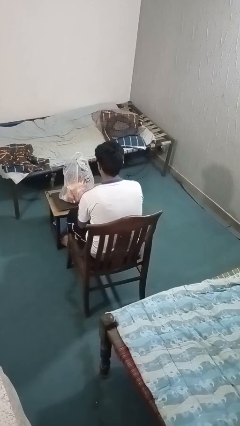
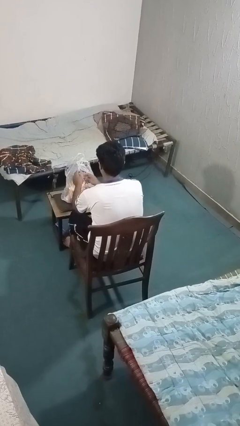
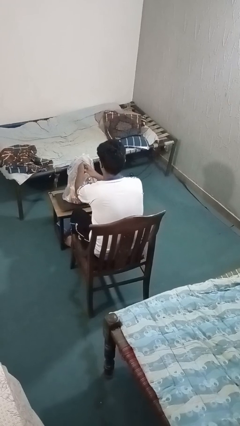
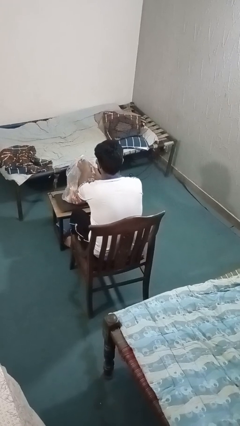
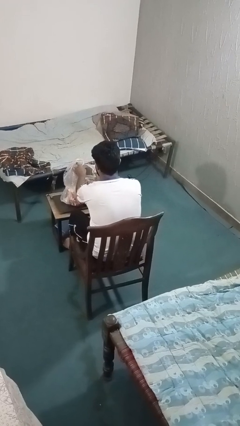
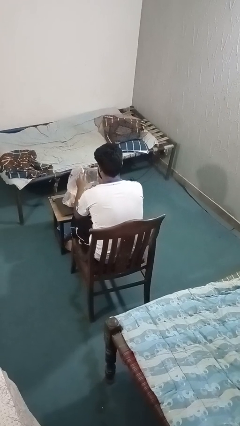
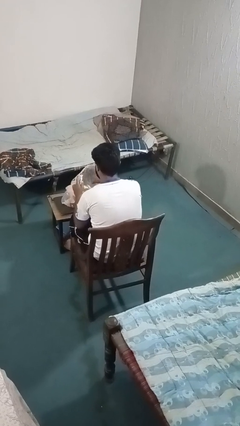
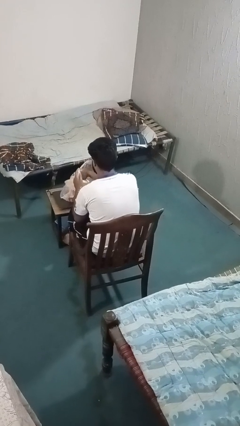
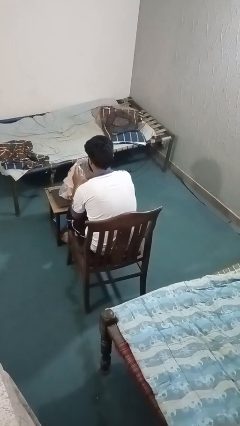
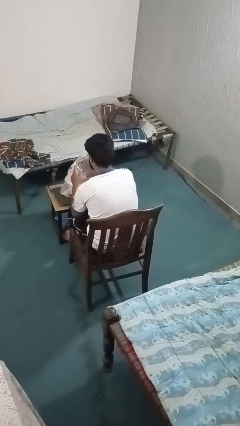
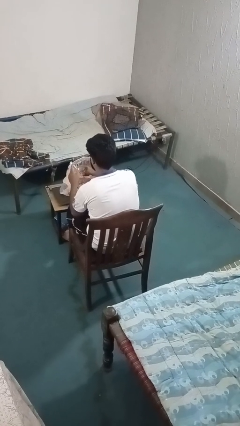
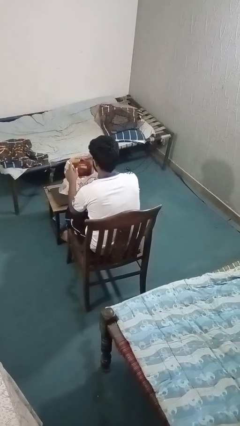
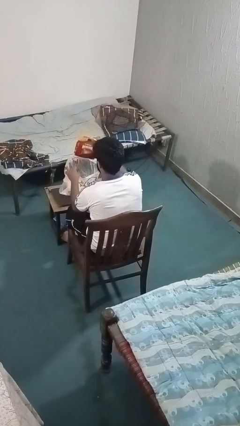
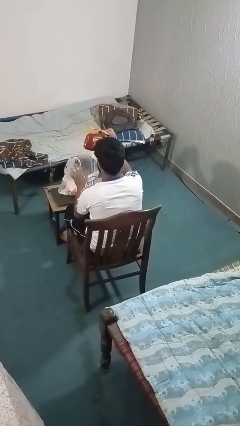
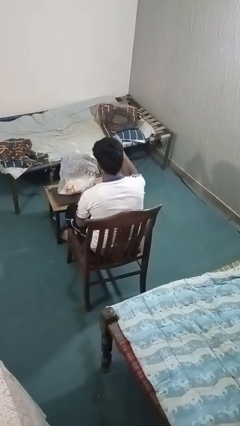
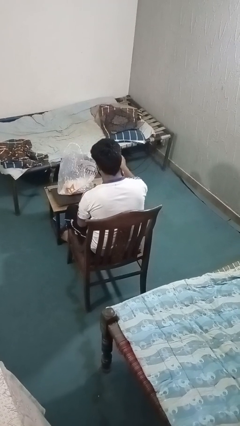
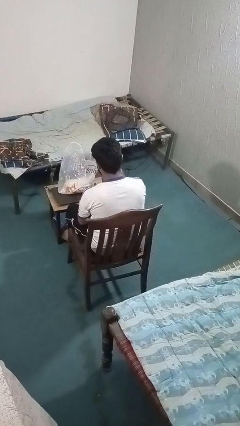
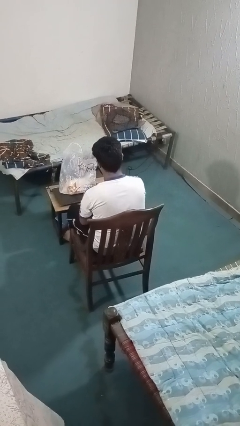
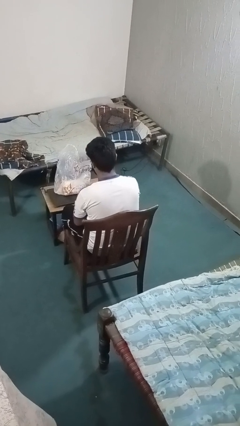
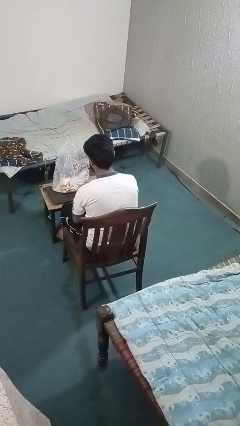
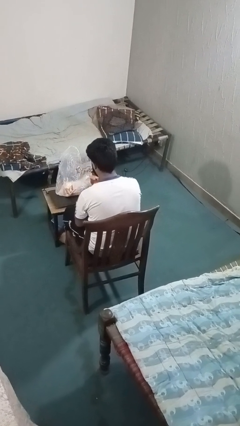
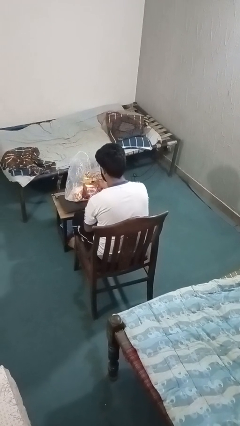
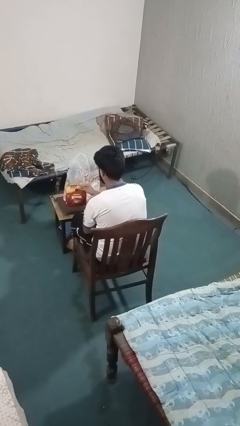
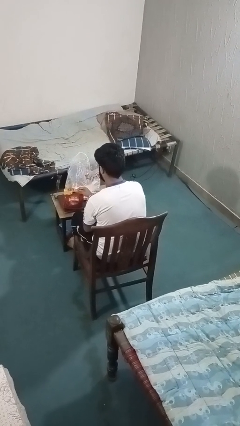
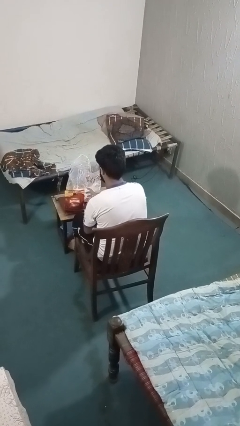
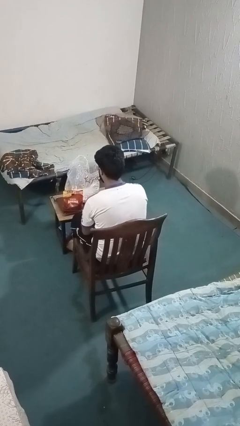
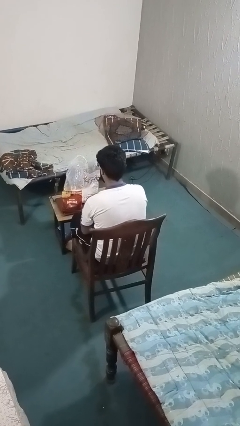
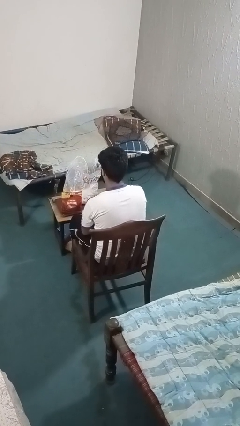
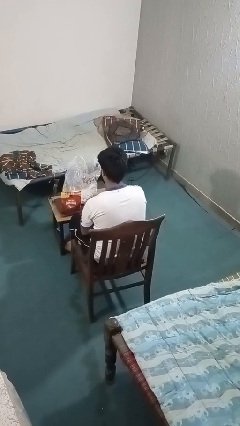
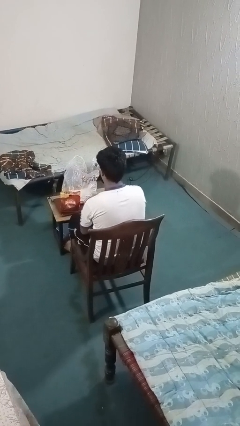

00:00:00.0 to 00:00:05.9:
person takes object from bag

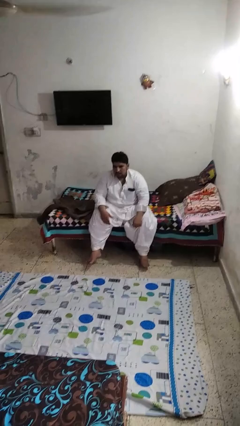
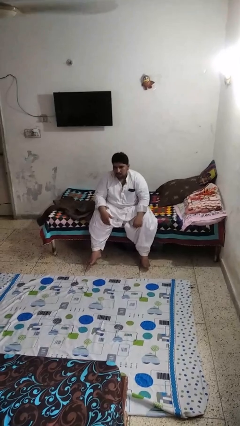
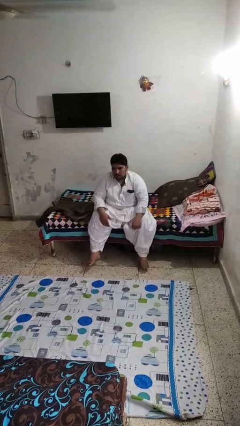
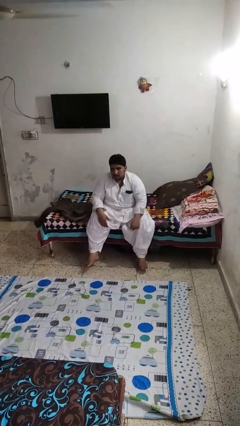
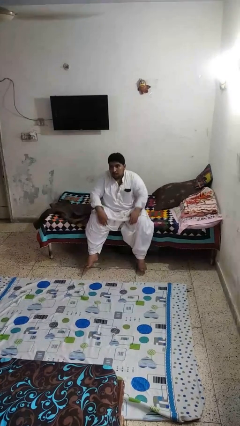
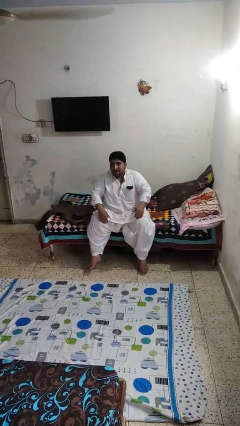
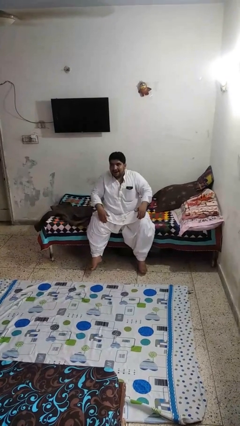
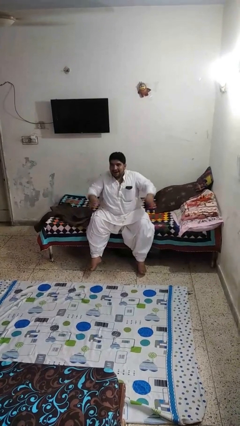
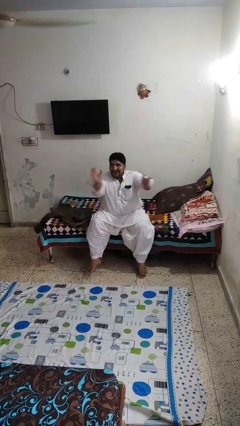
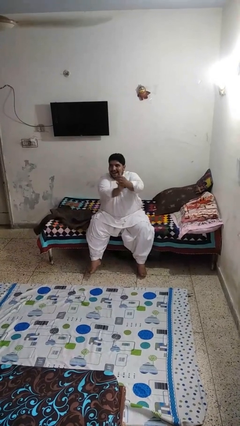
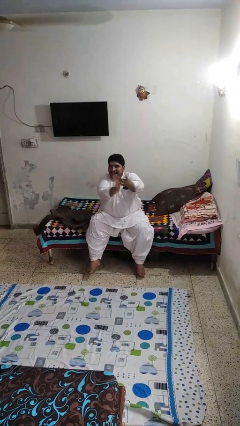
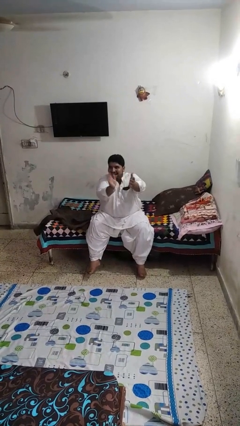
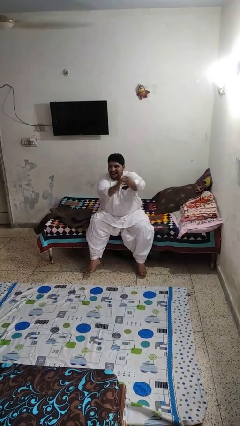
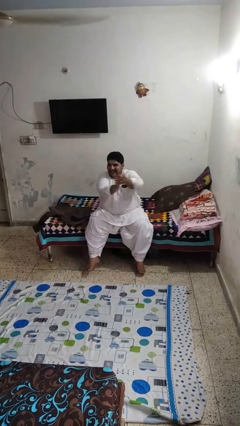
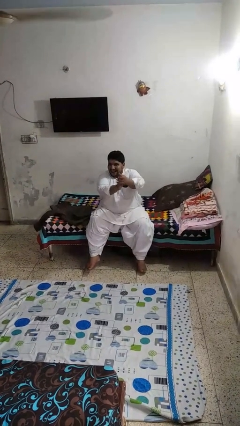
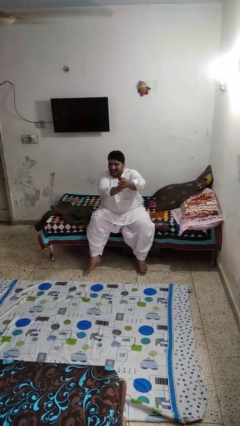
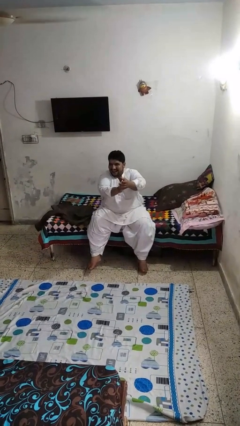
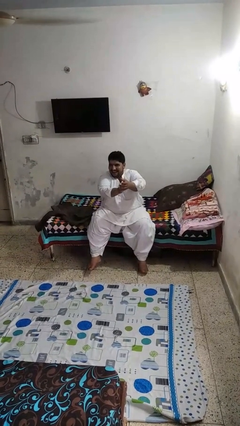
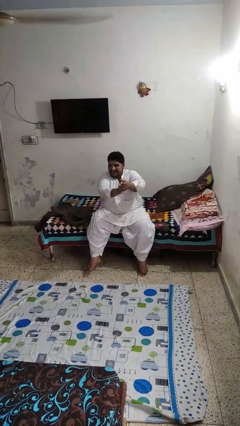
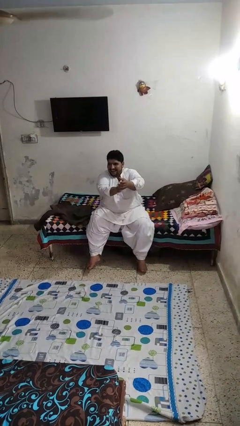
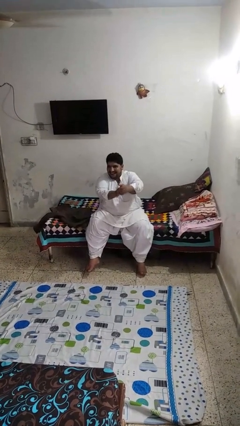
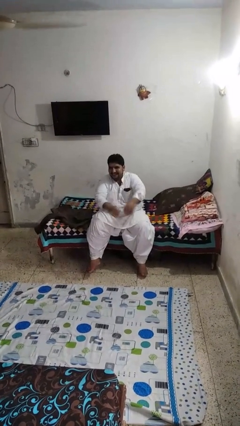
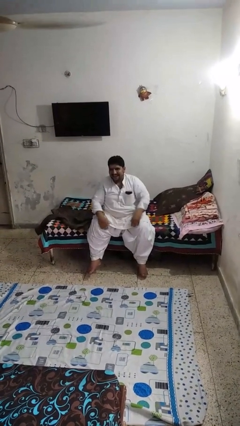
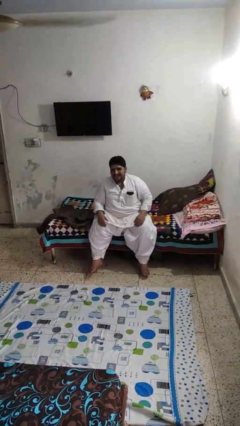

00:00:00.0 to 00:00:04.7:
person claps hands

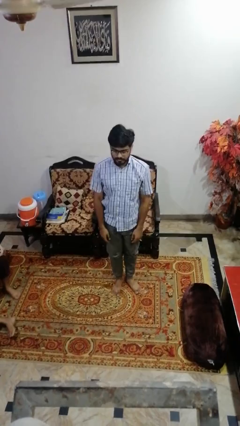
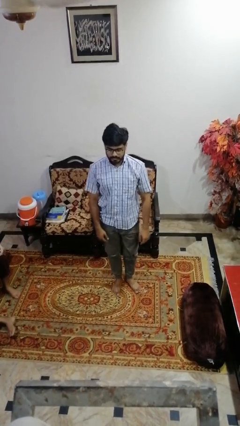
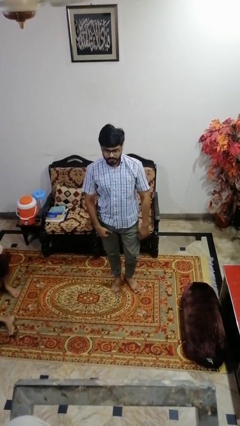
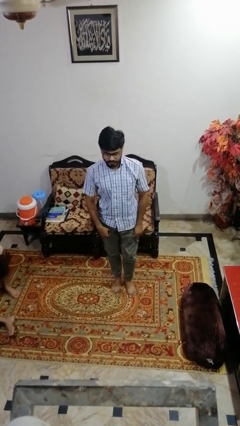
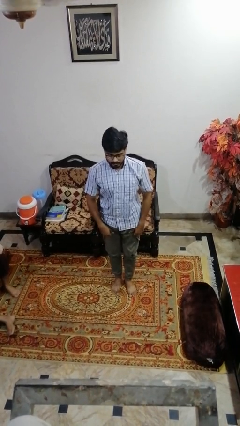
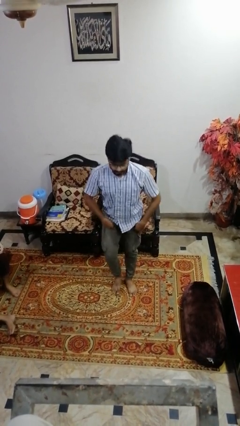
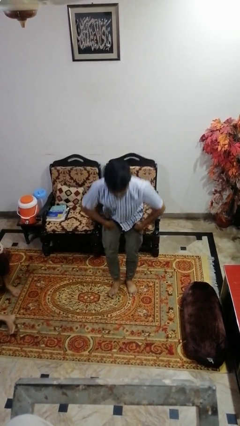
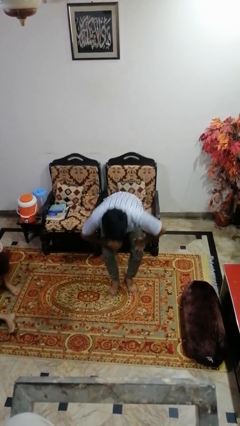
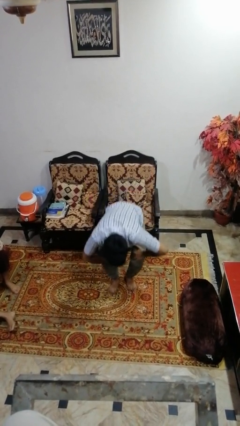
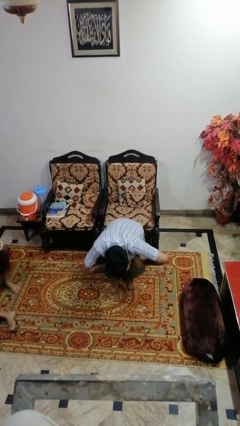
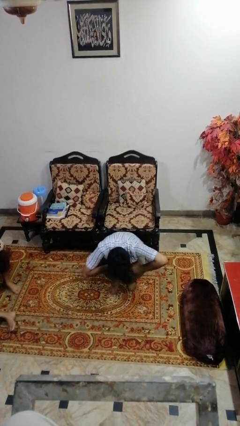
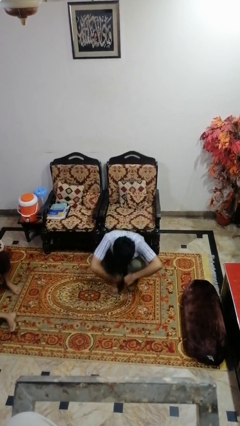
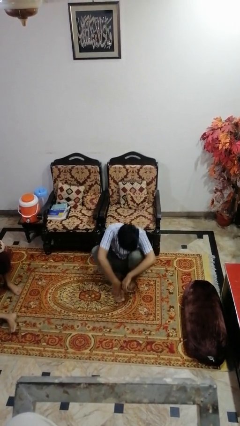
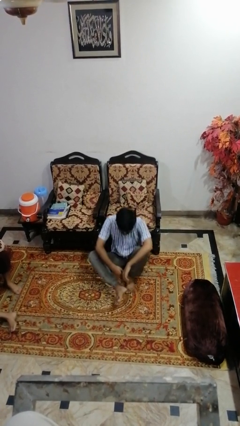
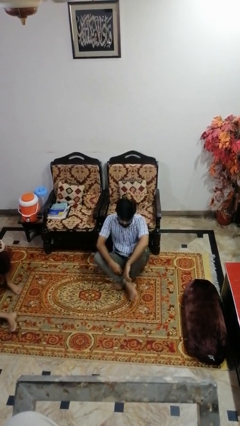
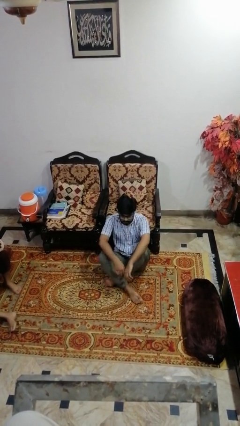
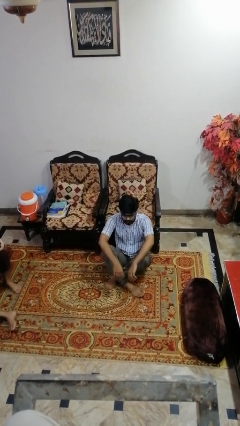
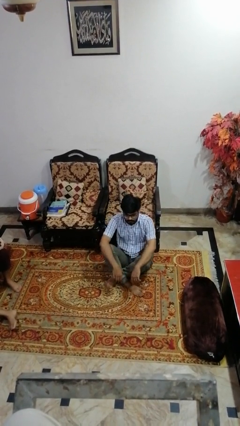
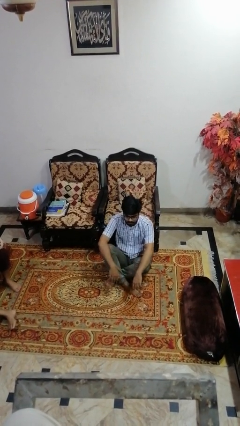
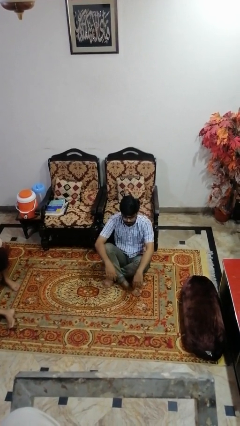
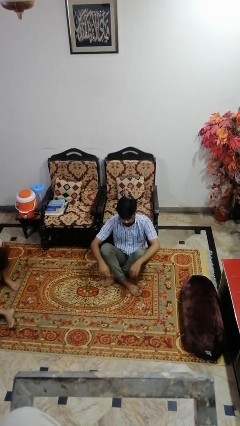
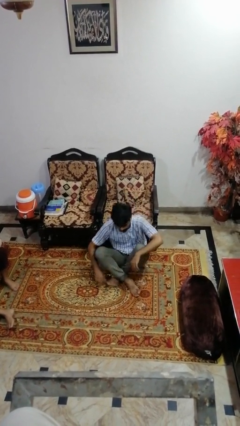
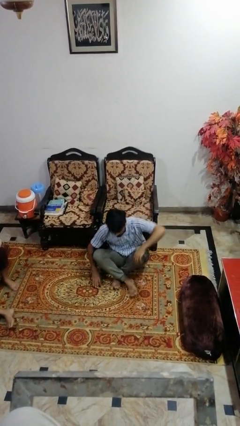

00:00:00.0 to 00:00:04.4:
person sits crisscross

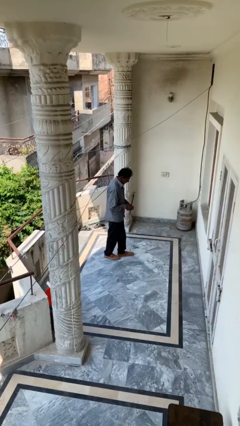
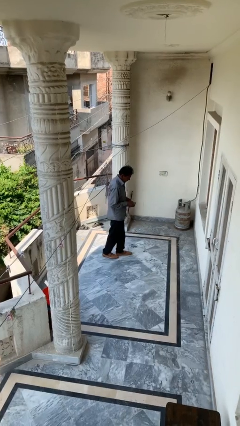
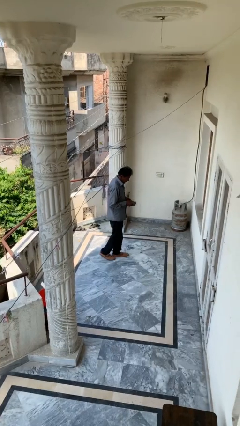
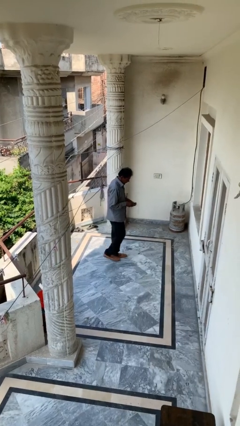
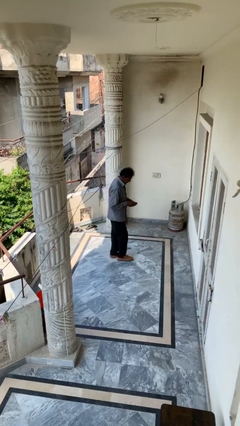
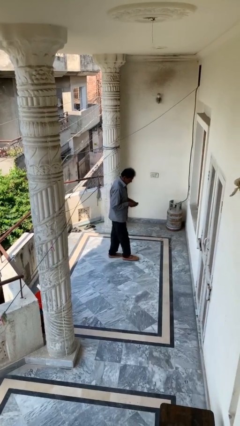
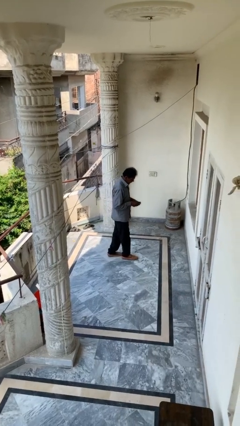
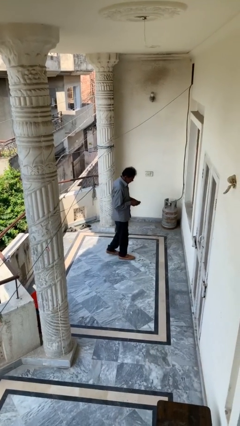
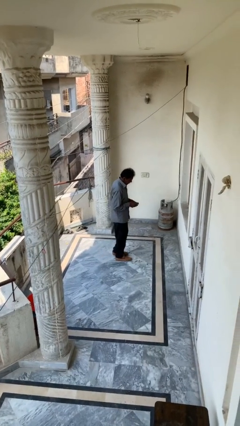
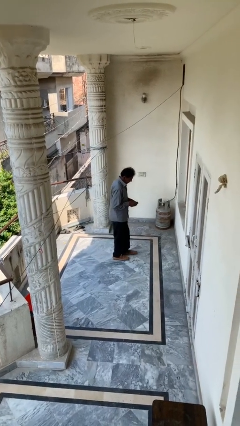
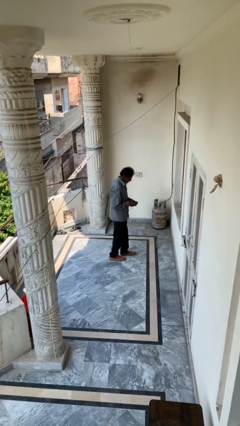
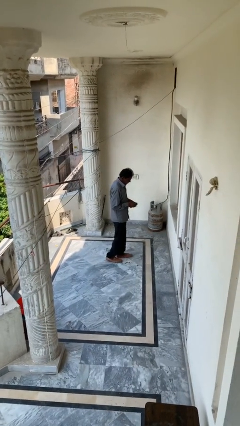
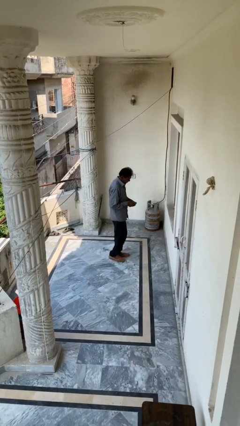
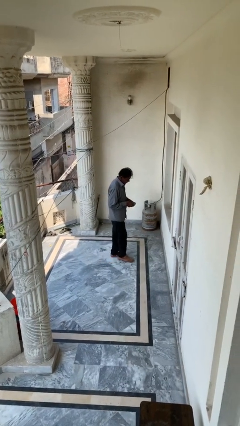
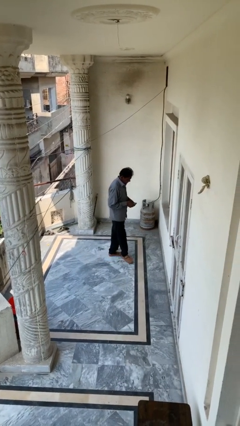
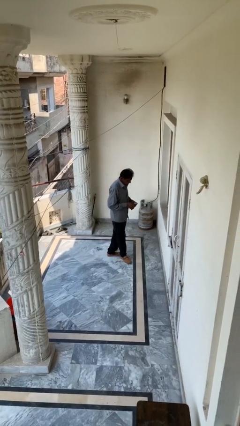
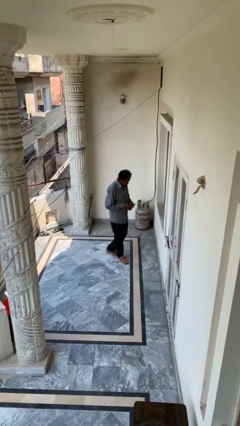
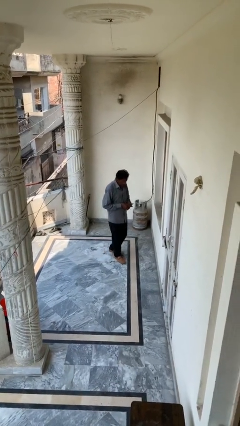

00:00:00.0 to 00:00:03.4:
person texts on phone
